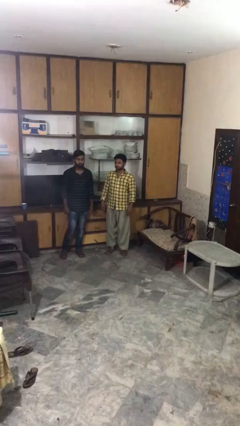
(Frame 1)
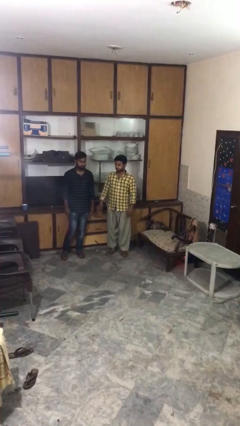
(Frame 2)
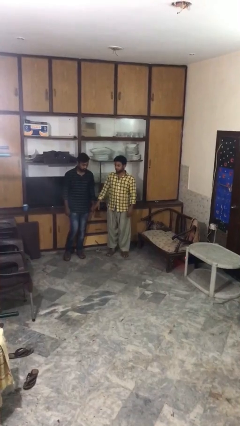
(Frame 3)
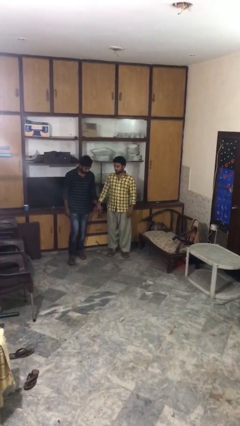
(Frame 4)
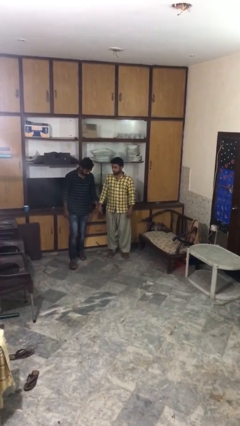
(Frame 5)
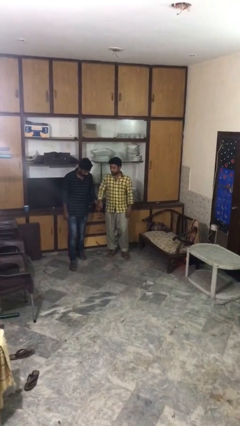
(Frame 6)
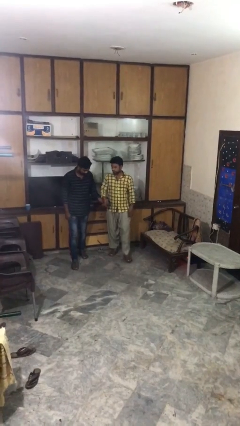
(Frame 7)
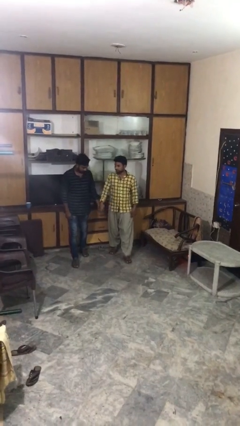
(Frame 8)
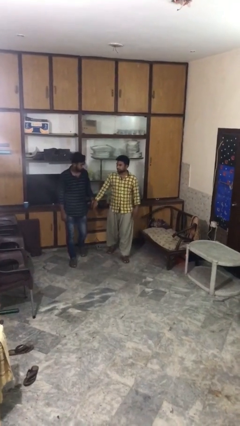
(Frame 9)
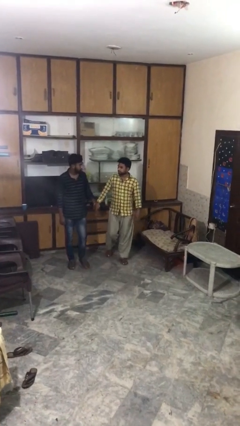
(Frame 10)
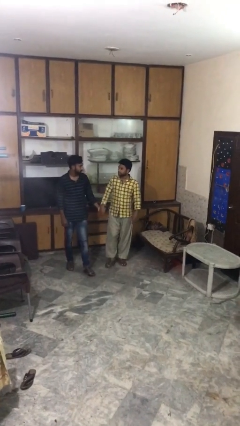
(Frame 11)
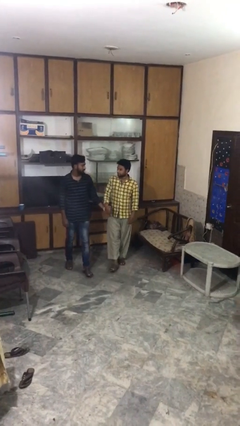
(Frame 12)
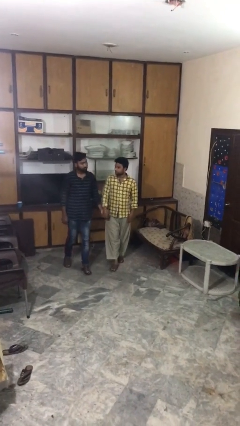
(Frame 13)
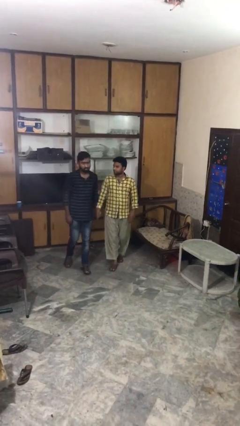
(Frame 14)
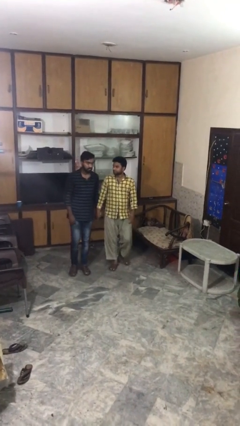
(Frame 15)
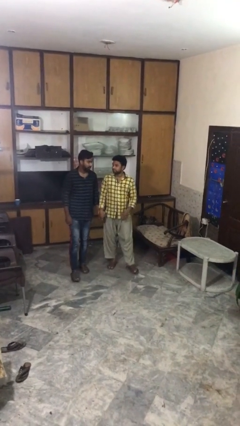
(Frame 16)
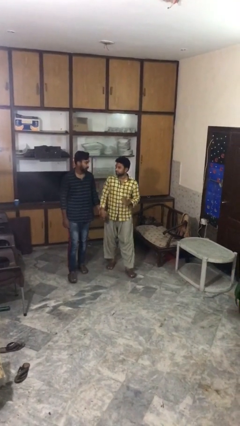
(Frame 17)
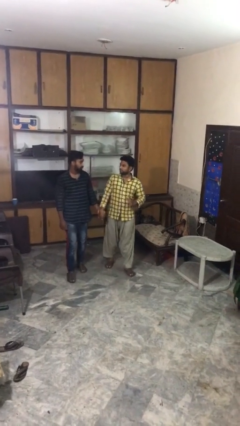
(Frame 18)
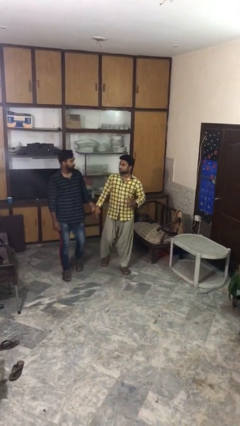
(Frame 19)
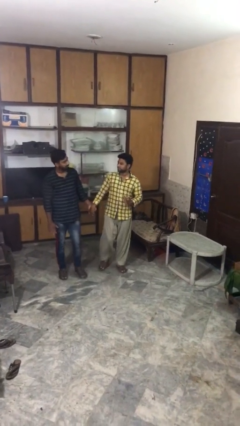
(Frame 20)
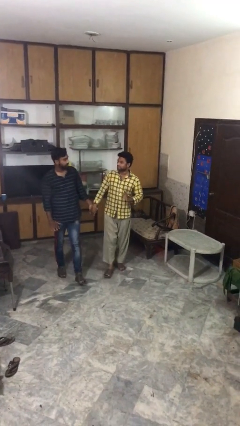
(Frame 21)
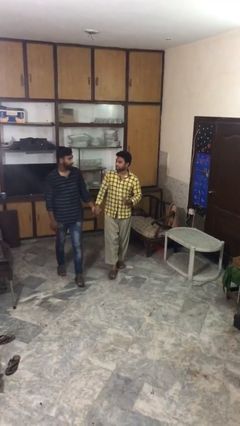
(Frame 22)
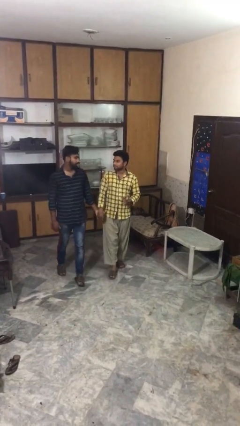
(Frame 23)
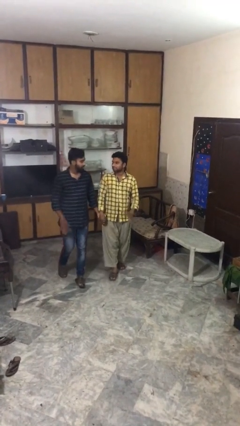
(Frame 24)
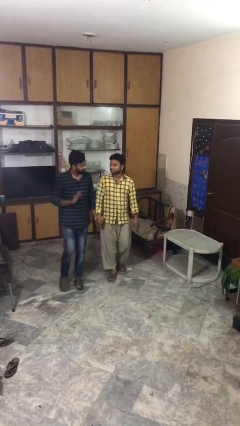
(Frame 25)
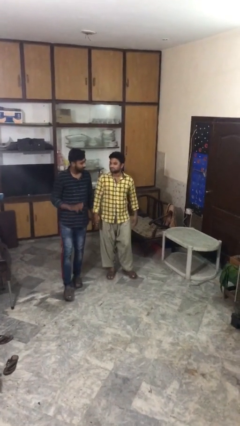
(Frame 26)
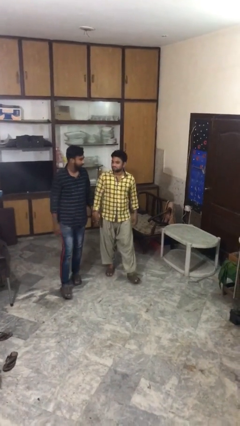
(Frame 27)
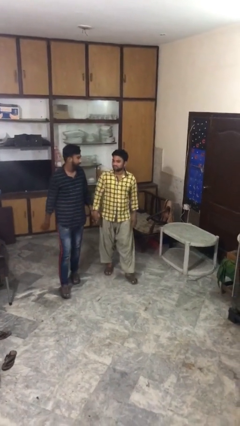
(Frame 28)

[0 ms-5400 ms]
person holds hand

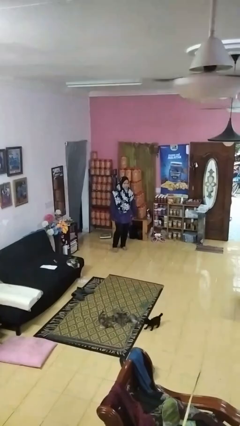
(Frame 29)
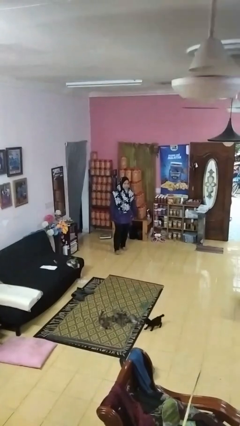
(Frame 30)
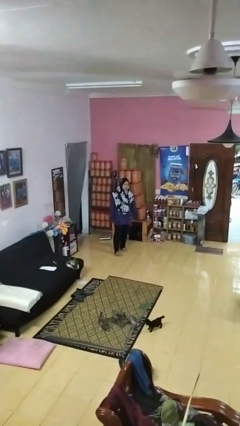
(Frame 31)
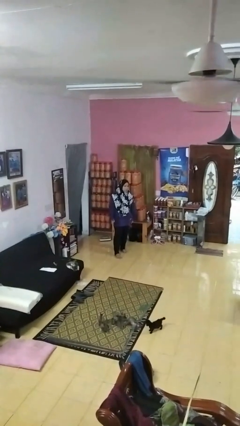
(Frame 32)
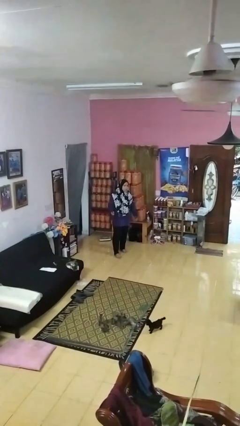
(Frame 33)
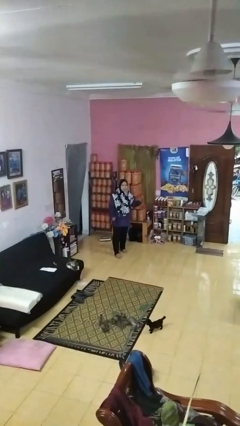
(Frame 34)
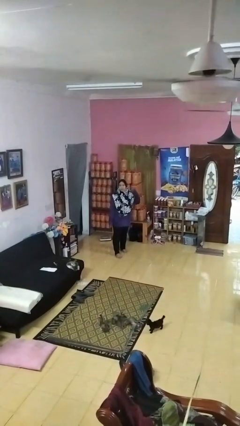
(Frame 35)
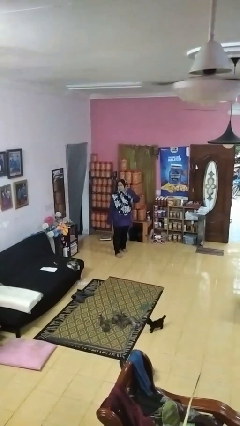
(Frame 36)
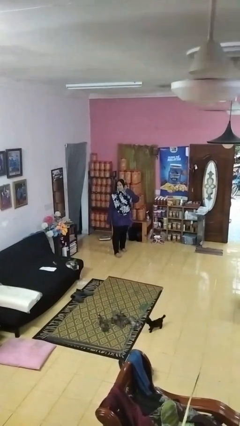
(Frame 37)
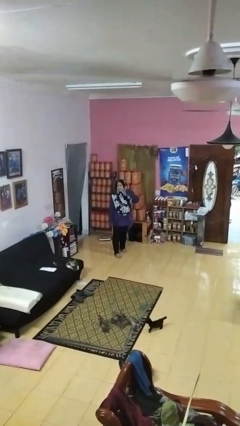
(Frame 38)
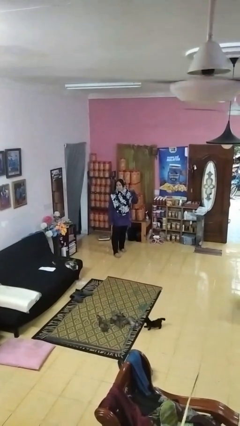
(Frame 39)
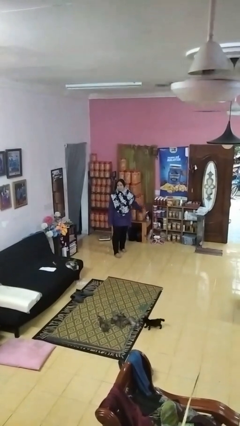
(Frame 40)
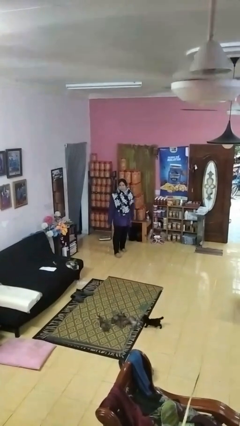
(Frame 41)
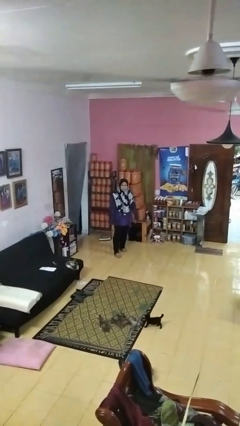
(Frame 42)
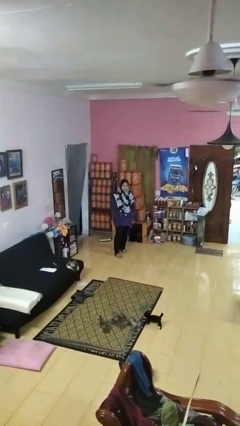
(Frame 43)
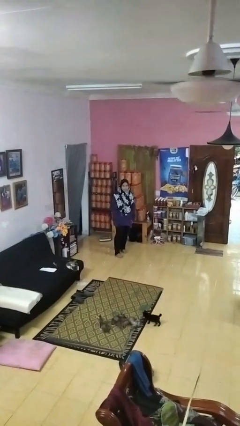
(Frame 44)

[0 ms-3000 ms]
person gestures listen closely

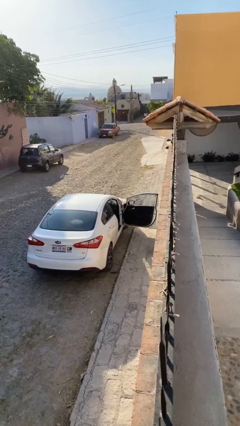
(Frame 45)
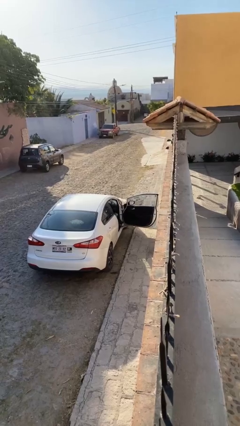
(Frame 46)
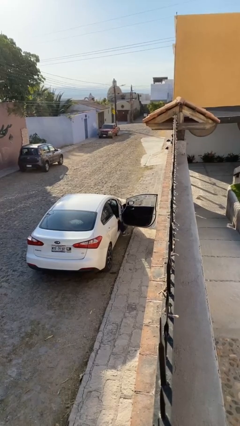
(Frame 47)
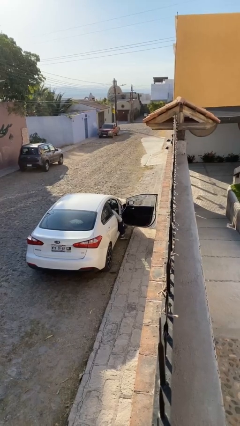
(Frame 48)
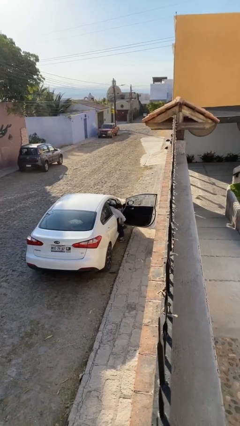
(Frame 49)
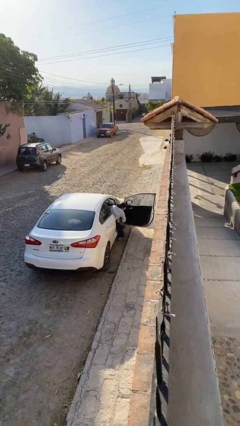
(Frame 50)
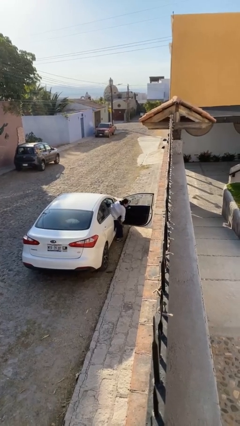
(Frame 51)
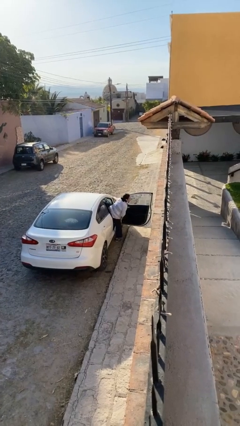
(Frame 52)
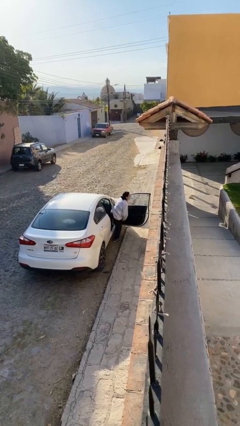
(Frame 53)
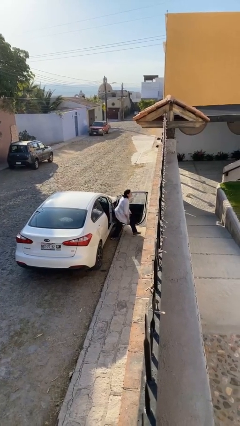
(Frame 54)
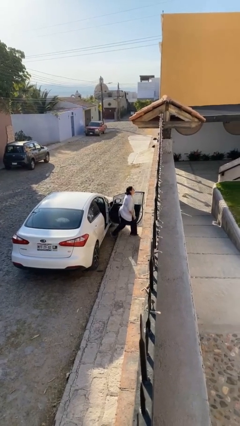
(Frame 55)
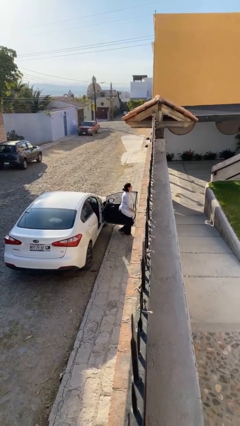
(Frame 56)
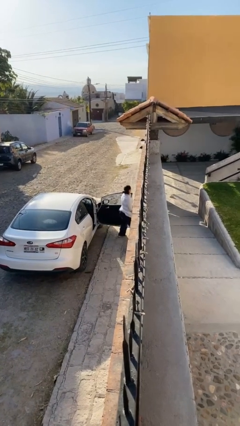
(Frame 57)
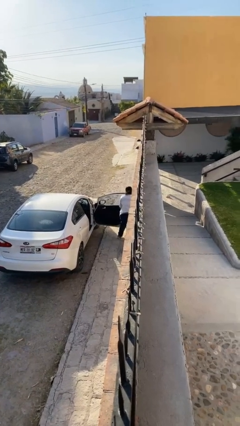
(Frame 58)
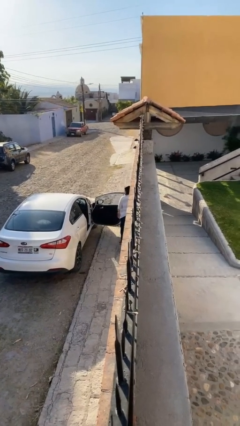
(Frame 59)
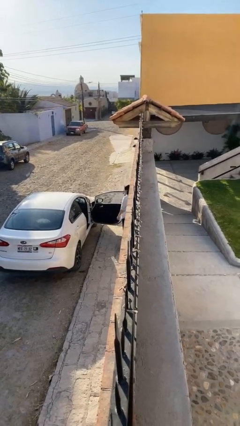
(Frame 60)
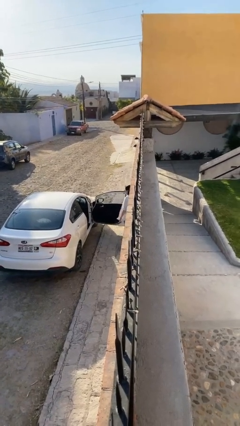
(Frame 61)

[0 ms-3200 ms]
person exits car

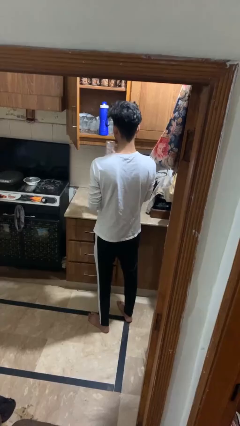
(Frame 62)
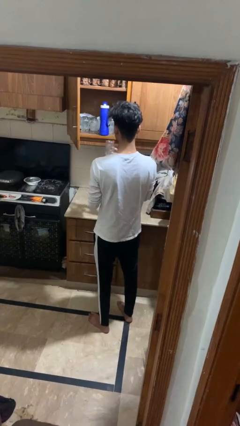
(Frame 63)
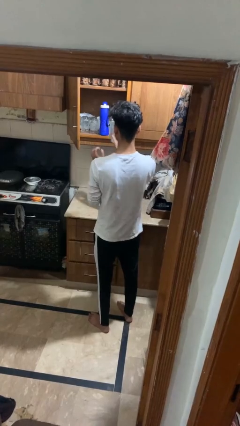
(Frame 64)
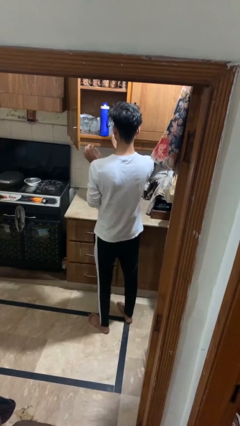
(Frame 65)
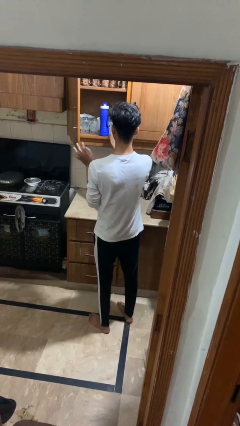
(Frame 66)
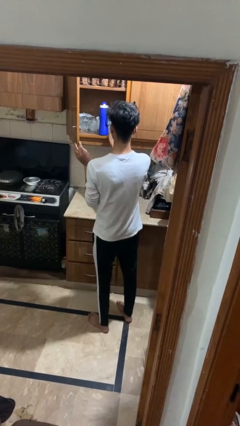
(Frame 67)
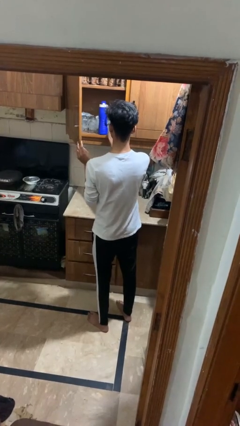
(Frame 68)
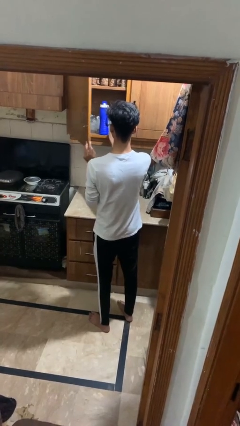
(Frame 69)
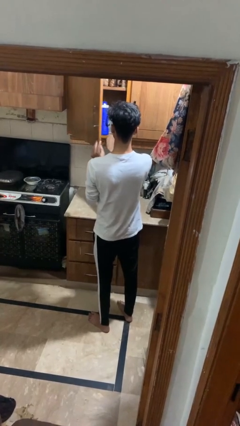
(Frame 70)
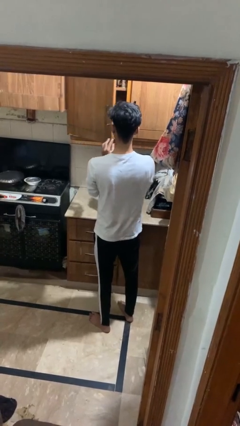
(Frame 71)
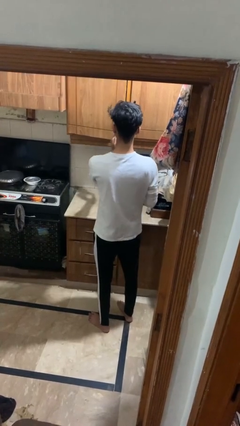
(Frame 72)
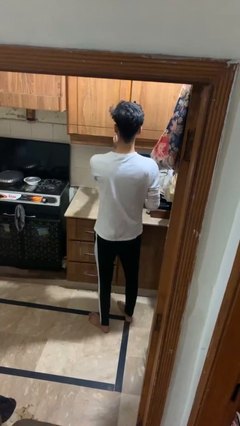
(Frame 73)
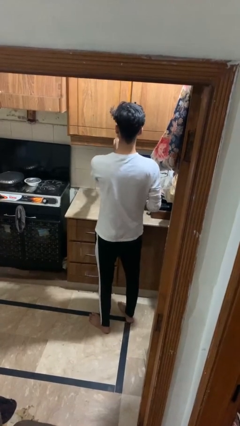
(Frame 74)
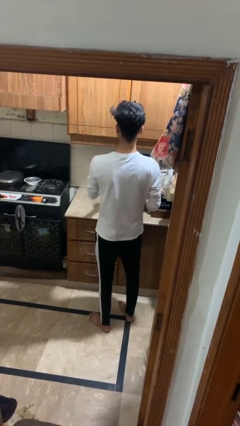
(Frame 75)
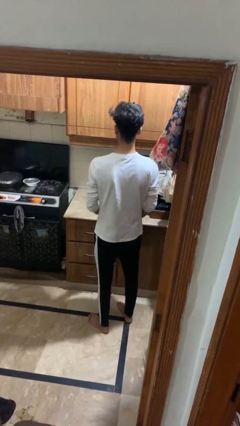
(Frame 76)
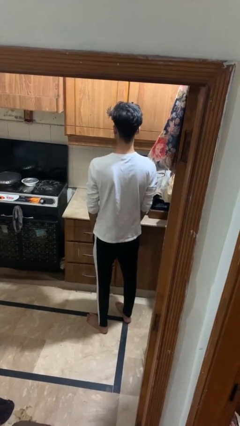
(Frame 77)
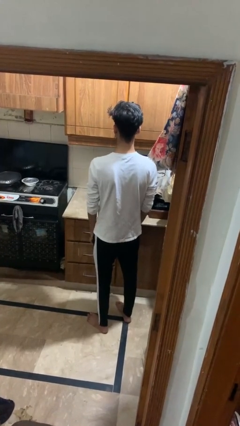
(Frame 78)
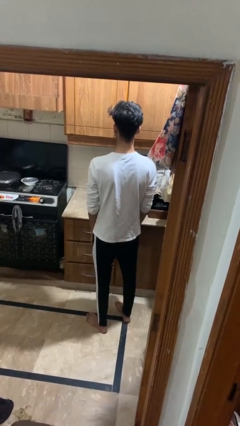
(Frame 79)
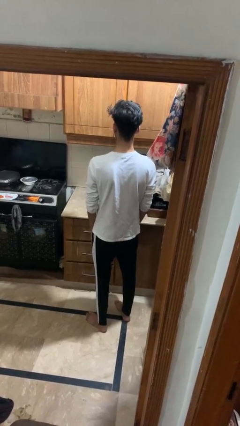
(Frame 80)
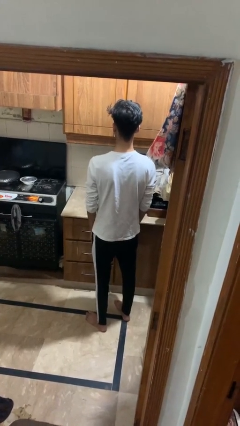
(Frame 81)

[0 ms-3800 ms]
person takes object from cabinet

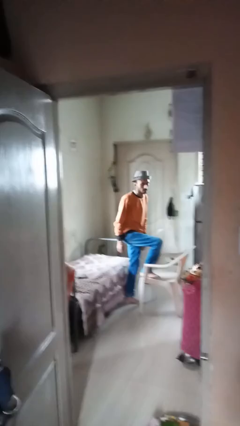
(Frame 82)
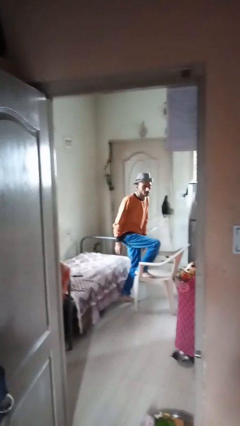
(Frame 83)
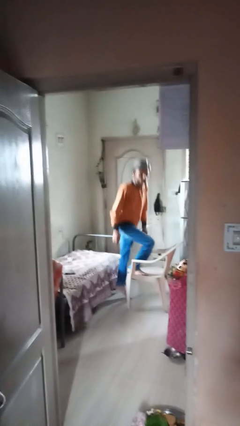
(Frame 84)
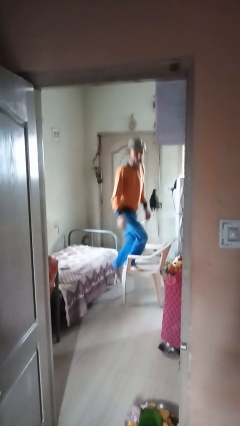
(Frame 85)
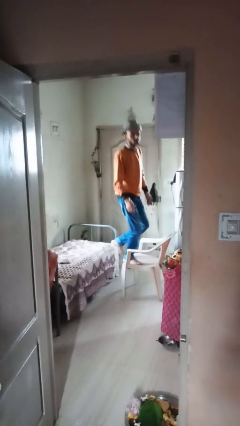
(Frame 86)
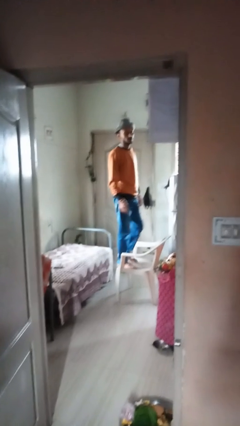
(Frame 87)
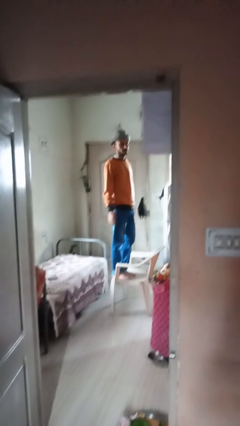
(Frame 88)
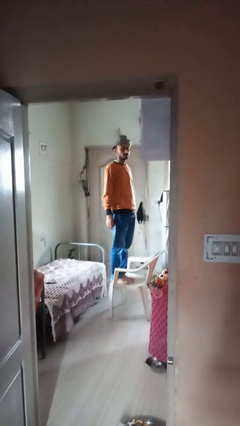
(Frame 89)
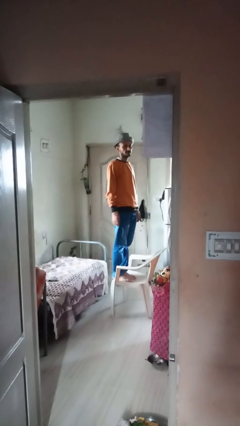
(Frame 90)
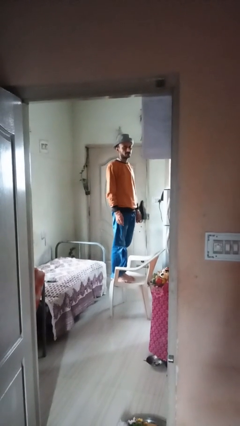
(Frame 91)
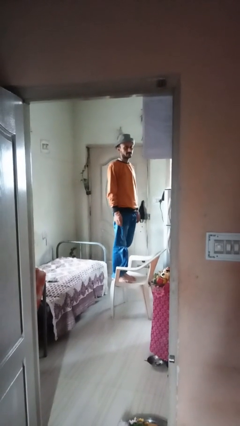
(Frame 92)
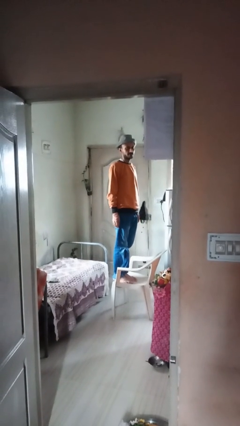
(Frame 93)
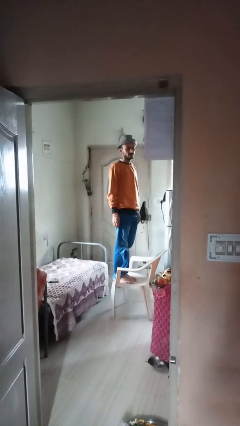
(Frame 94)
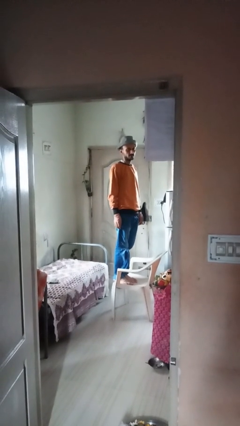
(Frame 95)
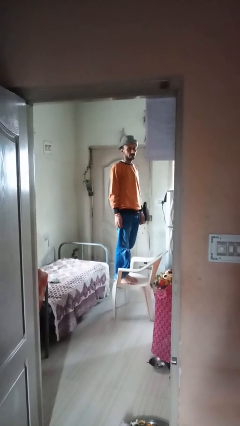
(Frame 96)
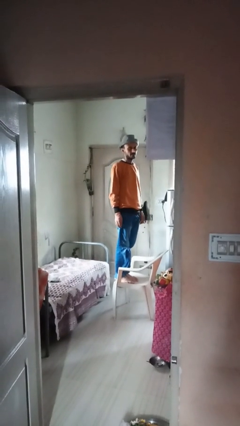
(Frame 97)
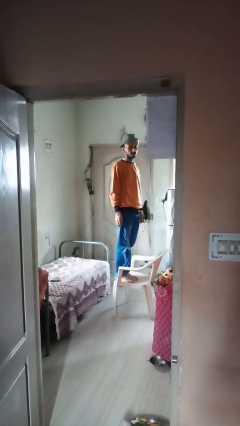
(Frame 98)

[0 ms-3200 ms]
person climbs on chair
